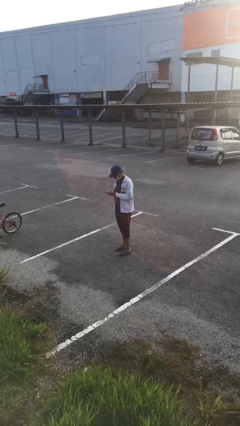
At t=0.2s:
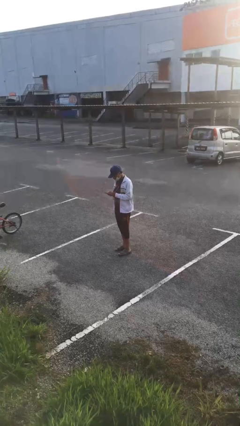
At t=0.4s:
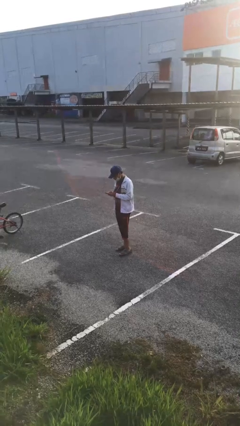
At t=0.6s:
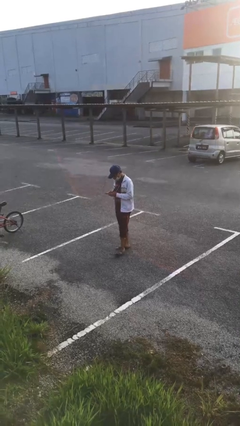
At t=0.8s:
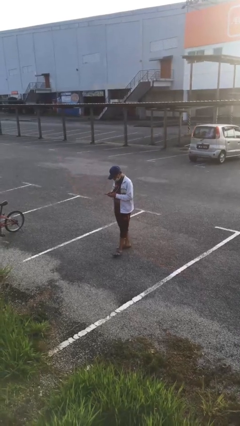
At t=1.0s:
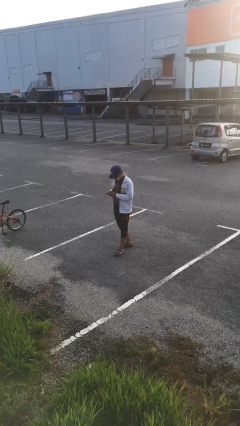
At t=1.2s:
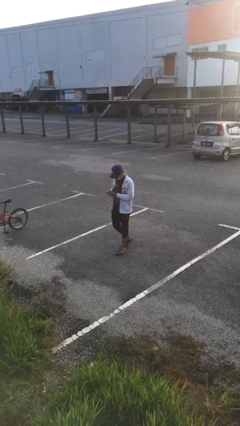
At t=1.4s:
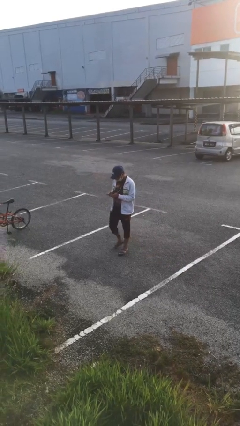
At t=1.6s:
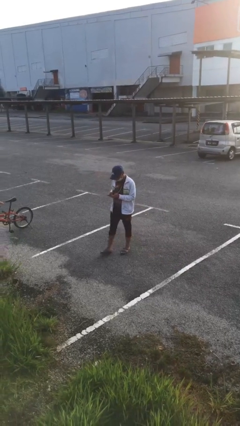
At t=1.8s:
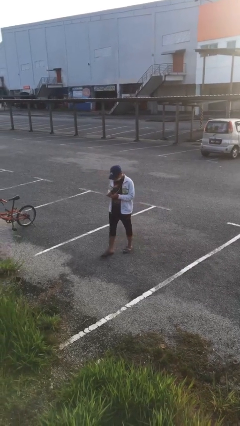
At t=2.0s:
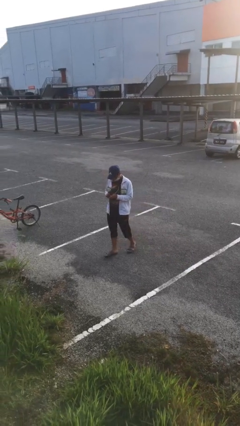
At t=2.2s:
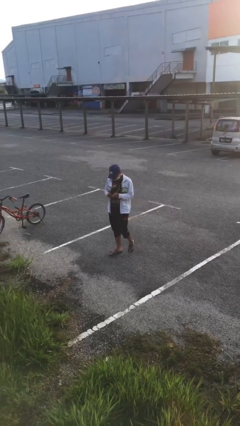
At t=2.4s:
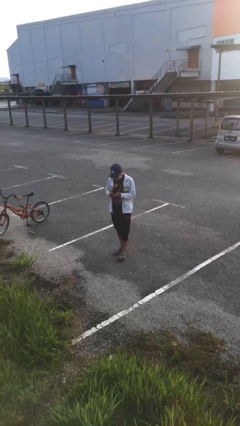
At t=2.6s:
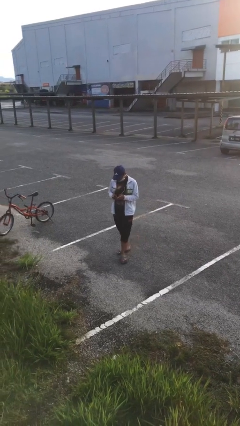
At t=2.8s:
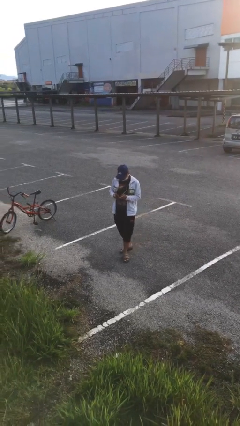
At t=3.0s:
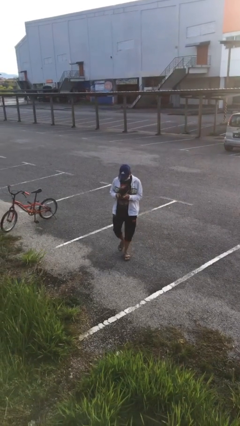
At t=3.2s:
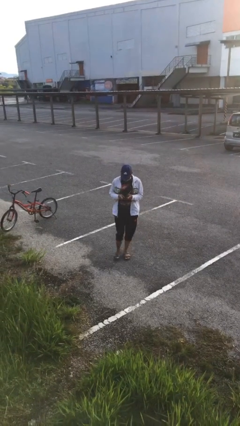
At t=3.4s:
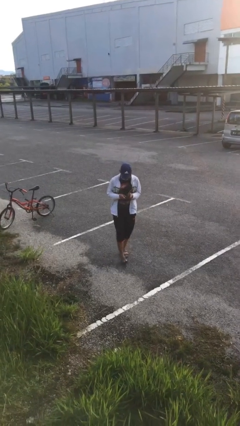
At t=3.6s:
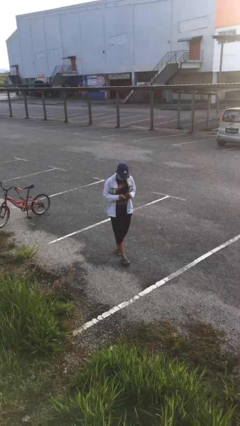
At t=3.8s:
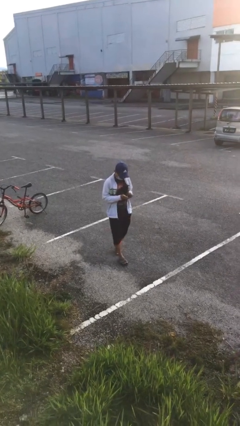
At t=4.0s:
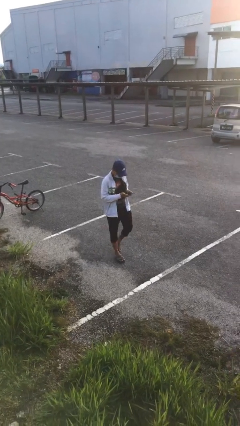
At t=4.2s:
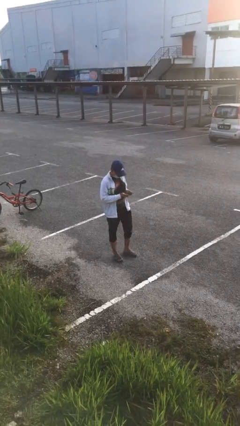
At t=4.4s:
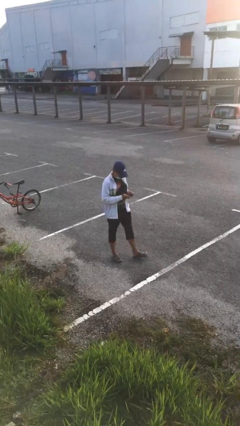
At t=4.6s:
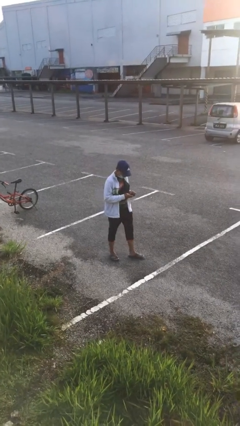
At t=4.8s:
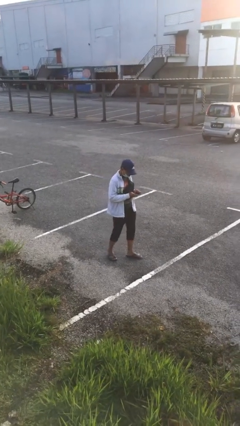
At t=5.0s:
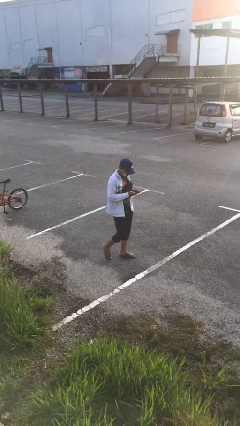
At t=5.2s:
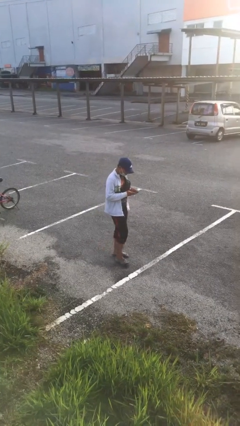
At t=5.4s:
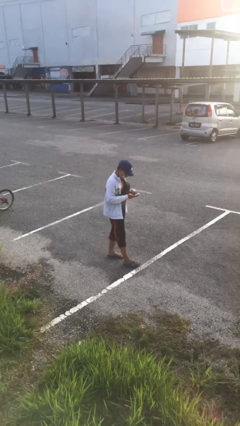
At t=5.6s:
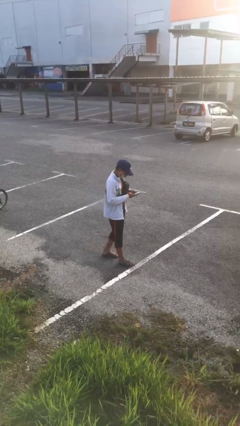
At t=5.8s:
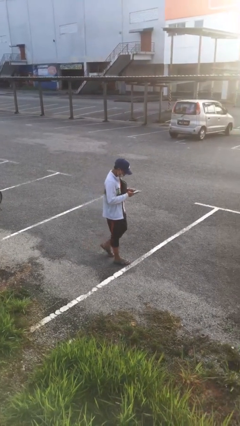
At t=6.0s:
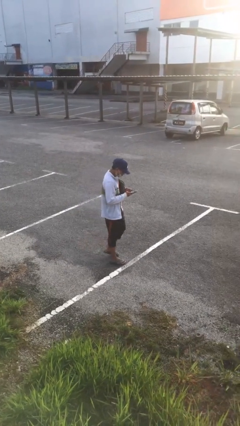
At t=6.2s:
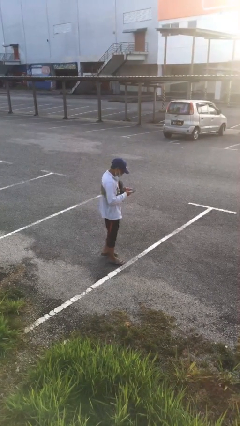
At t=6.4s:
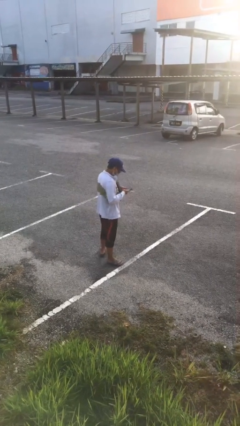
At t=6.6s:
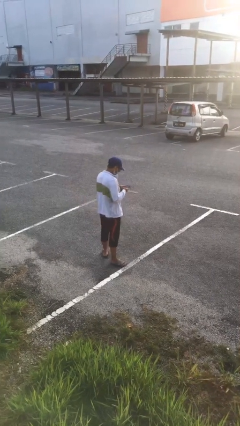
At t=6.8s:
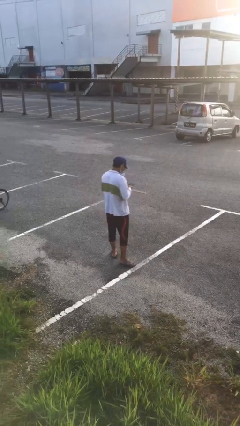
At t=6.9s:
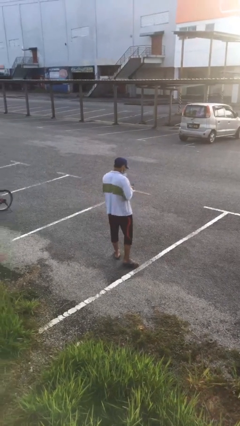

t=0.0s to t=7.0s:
person texts on phone

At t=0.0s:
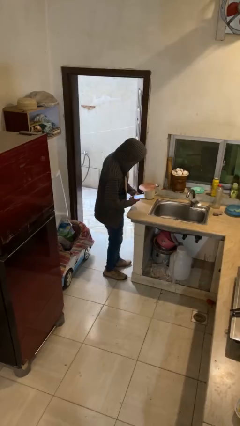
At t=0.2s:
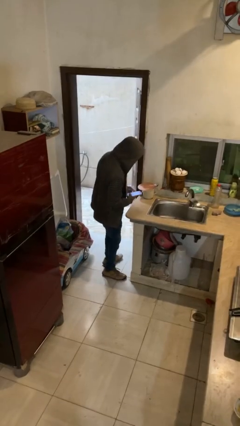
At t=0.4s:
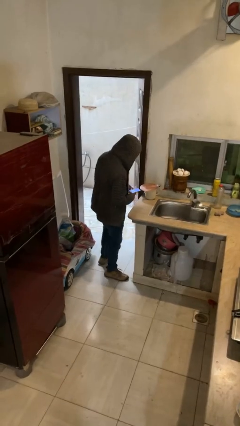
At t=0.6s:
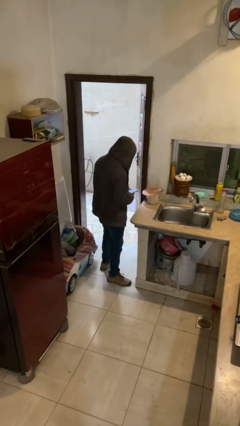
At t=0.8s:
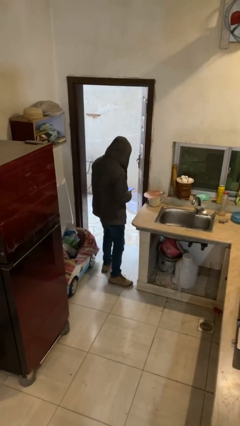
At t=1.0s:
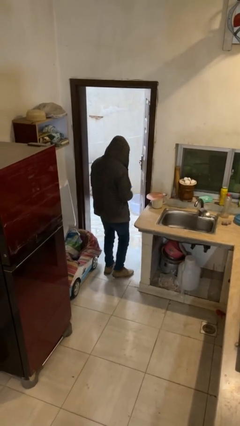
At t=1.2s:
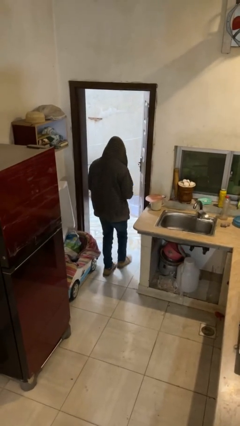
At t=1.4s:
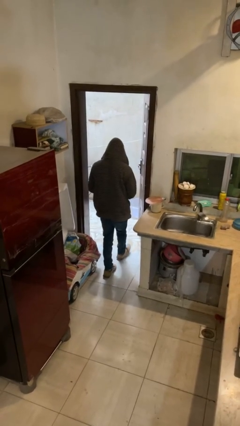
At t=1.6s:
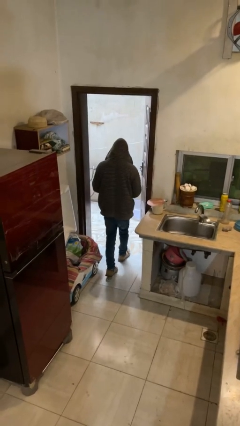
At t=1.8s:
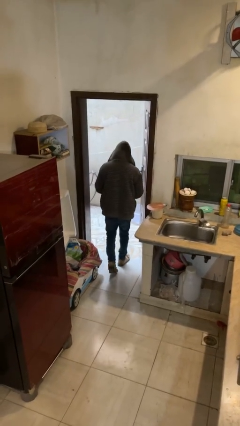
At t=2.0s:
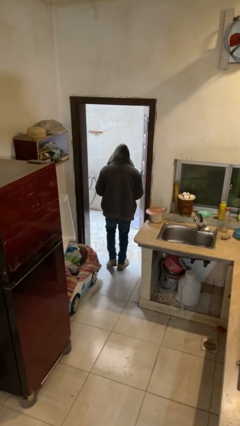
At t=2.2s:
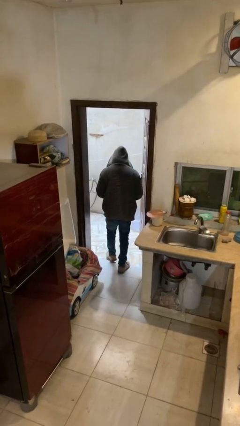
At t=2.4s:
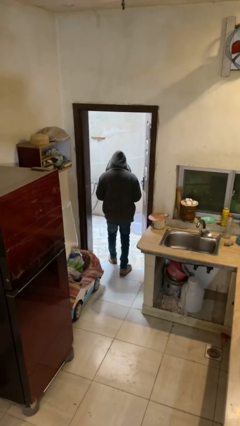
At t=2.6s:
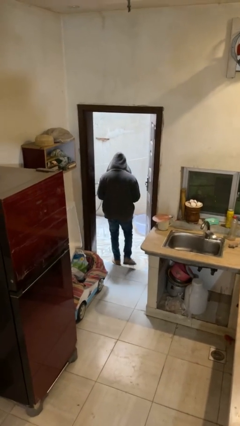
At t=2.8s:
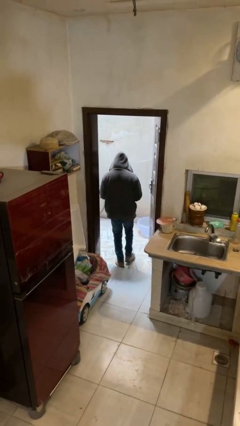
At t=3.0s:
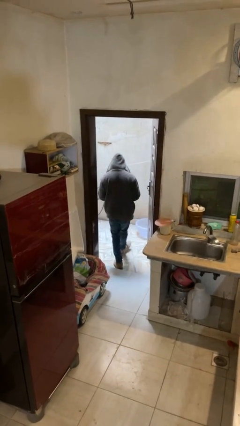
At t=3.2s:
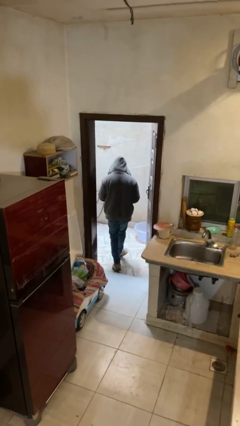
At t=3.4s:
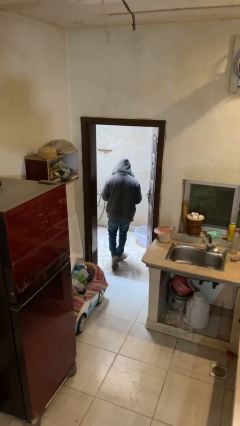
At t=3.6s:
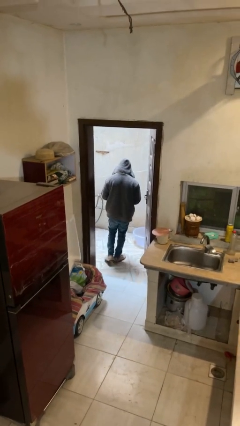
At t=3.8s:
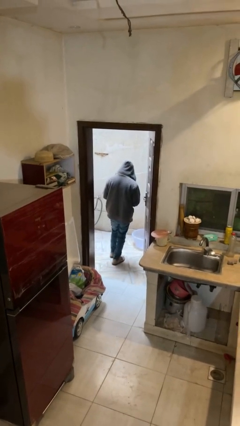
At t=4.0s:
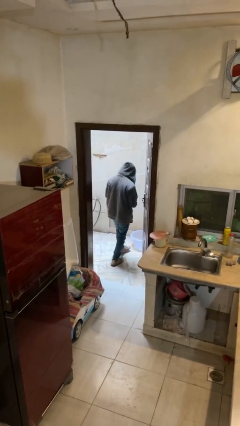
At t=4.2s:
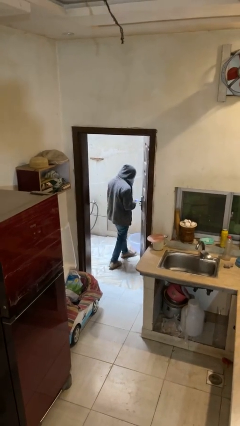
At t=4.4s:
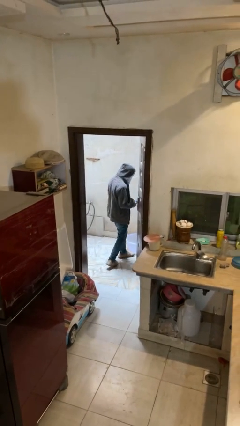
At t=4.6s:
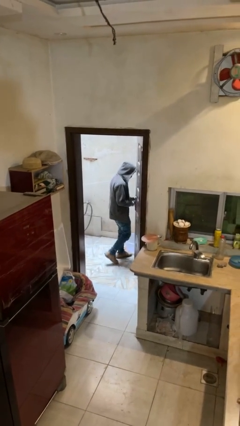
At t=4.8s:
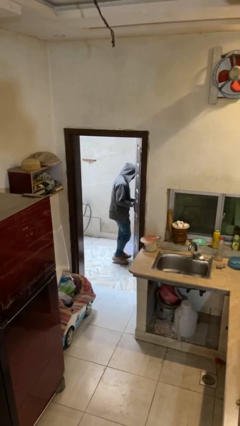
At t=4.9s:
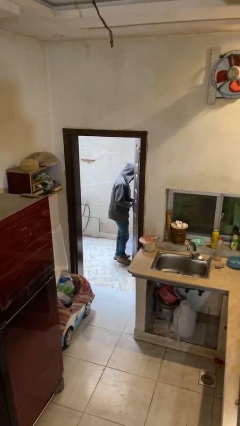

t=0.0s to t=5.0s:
person exits scene through structure

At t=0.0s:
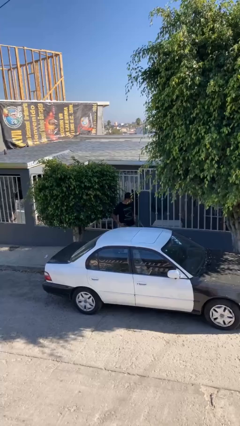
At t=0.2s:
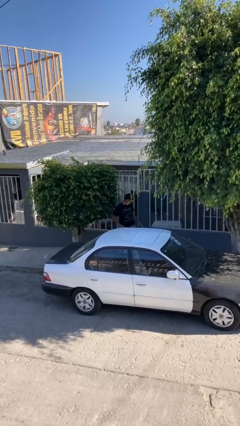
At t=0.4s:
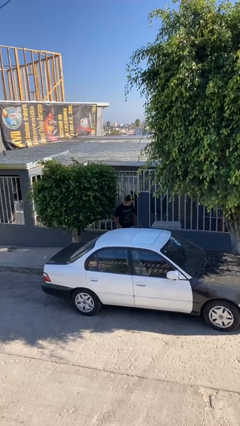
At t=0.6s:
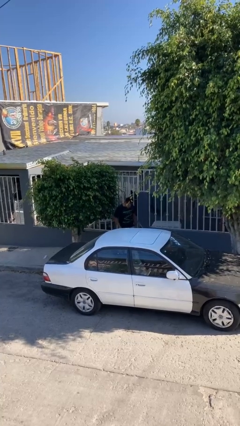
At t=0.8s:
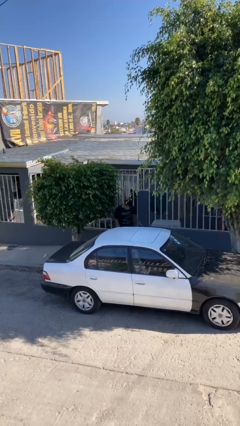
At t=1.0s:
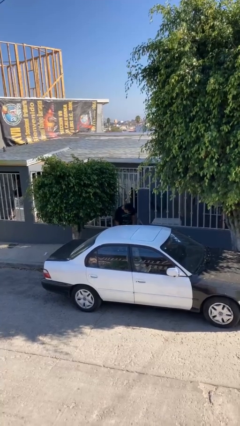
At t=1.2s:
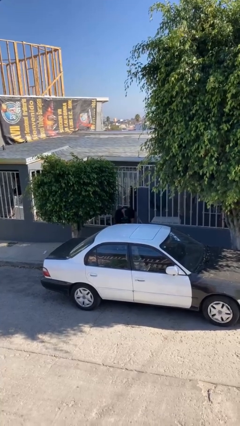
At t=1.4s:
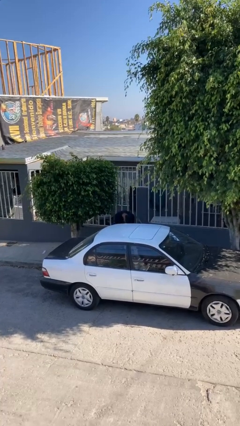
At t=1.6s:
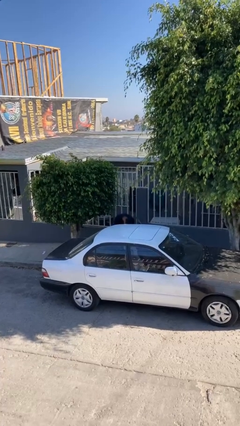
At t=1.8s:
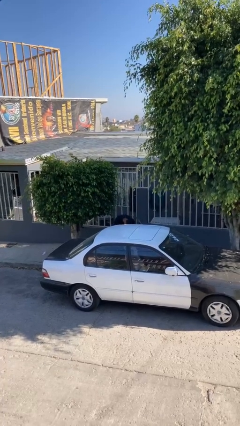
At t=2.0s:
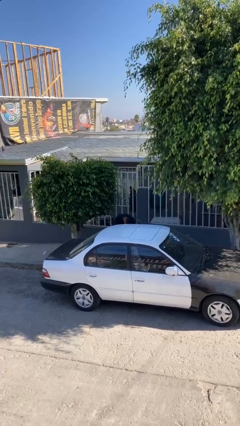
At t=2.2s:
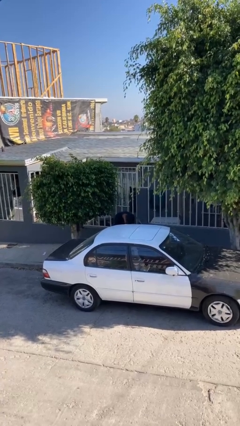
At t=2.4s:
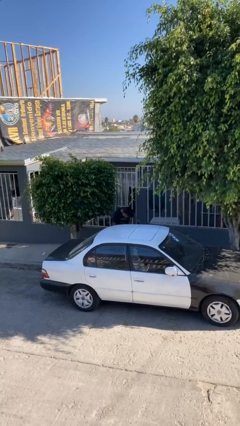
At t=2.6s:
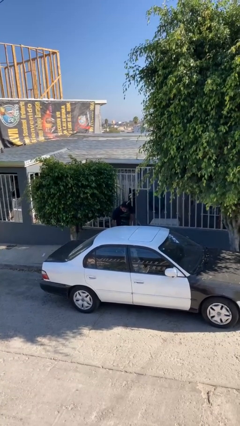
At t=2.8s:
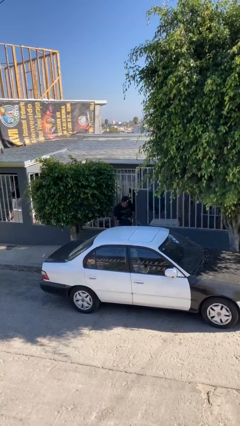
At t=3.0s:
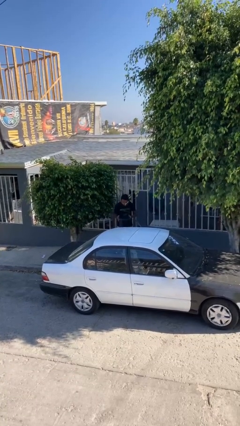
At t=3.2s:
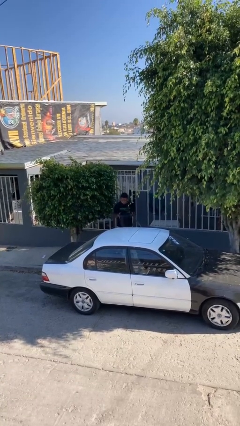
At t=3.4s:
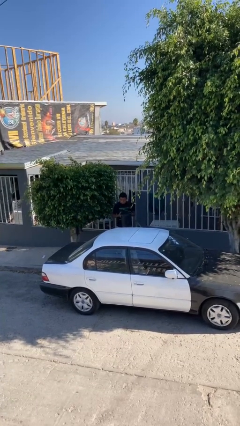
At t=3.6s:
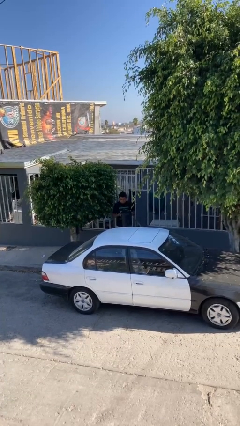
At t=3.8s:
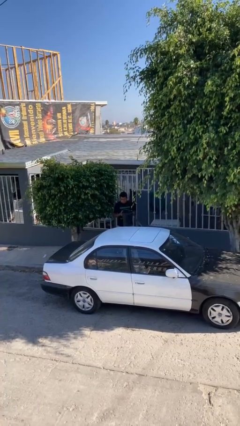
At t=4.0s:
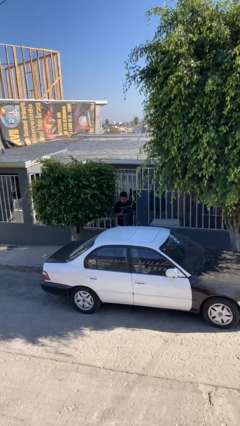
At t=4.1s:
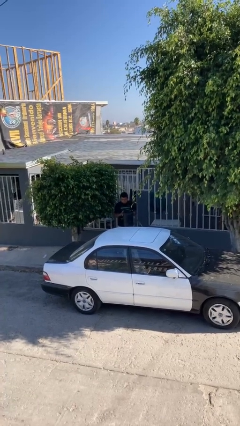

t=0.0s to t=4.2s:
person unloads car

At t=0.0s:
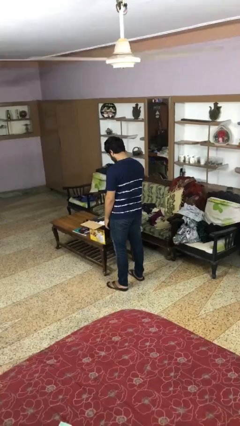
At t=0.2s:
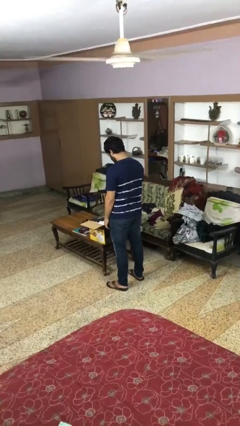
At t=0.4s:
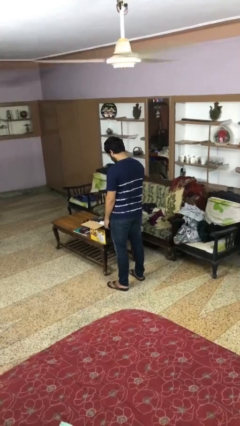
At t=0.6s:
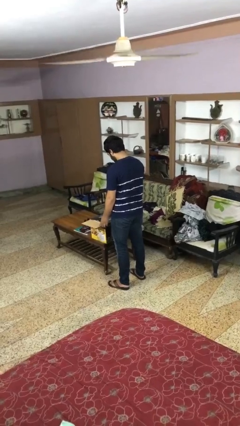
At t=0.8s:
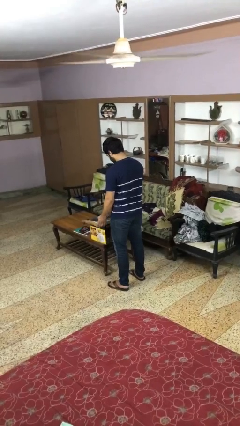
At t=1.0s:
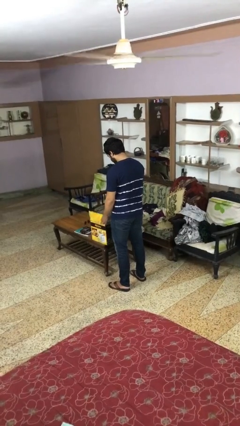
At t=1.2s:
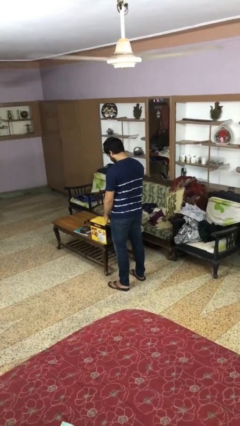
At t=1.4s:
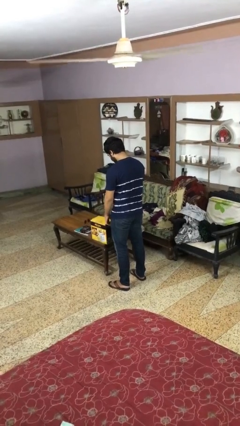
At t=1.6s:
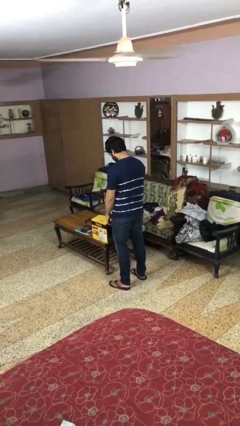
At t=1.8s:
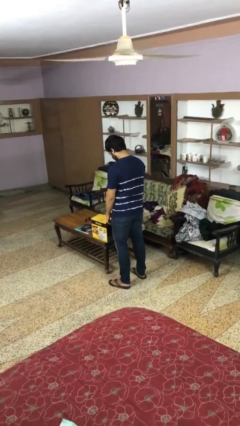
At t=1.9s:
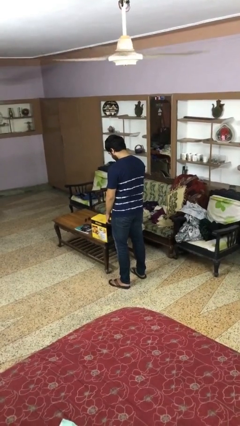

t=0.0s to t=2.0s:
person closes box
